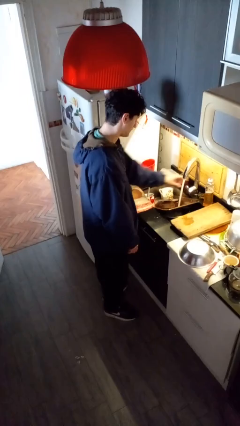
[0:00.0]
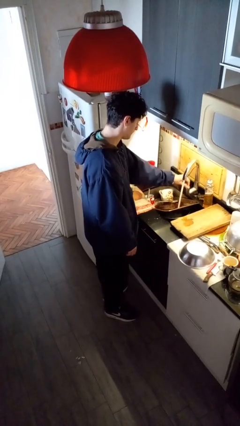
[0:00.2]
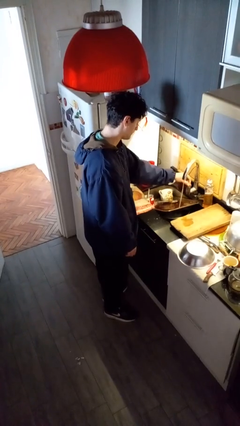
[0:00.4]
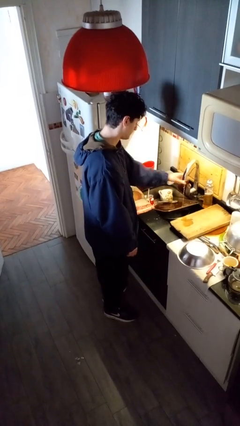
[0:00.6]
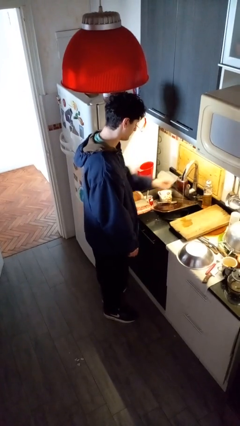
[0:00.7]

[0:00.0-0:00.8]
person turns off faucet

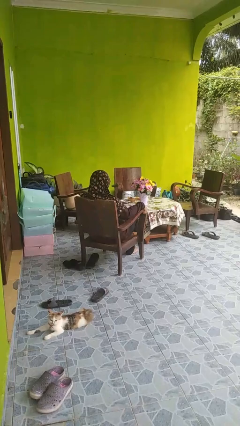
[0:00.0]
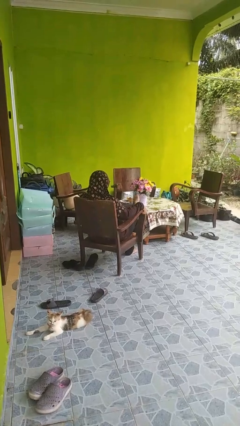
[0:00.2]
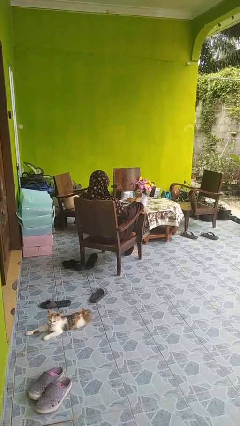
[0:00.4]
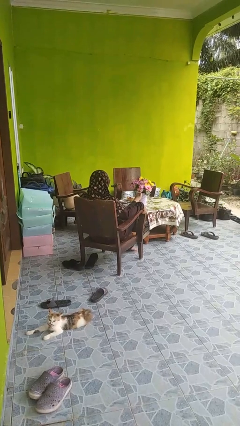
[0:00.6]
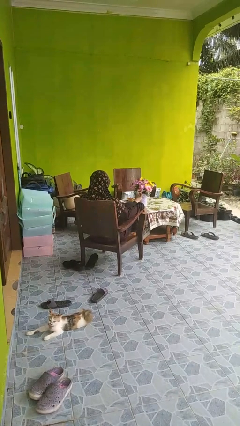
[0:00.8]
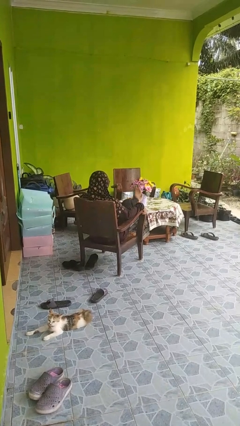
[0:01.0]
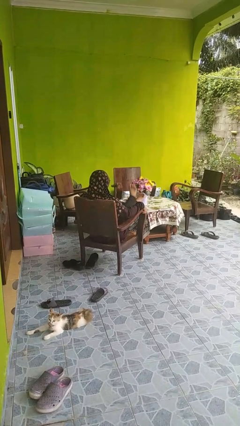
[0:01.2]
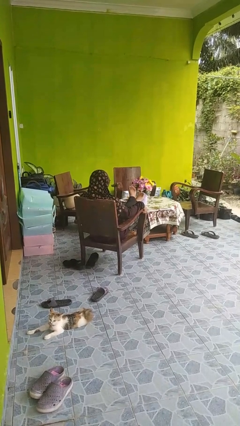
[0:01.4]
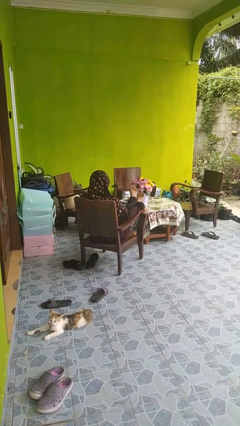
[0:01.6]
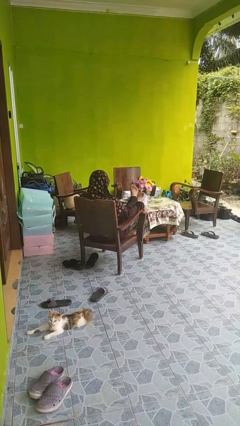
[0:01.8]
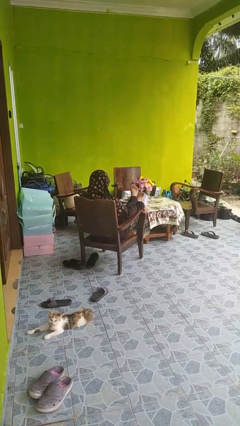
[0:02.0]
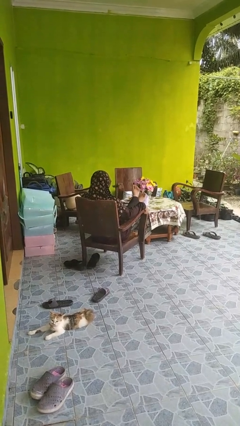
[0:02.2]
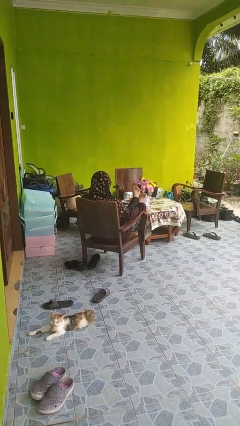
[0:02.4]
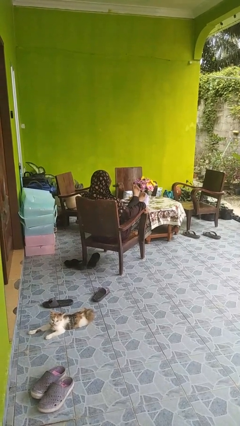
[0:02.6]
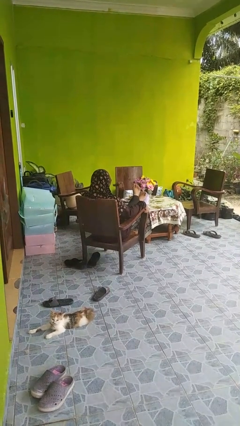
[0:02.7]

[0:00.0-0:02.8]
person puts feet up

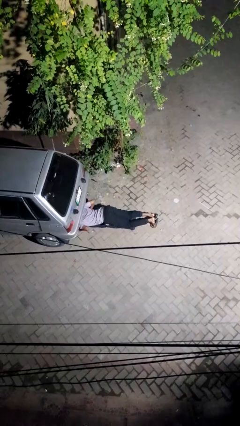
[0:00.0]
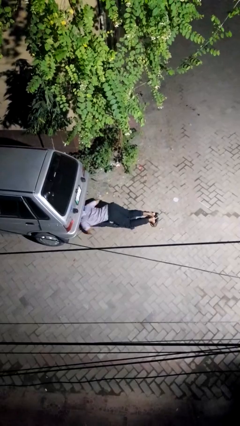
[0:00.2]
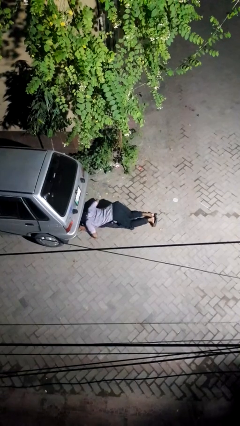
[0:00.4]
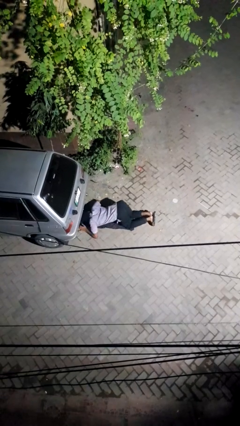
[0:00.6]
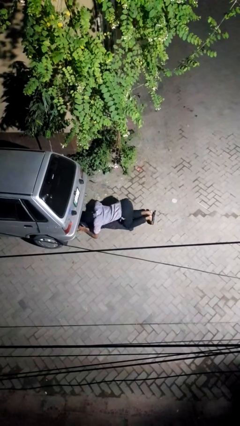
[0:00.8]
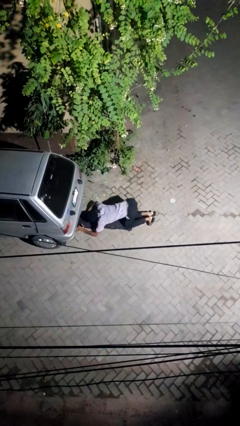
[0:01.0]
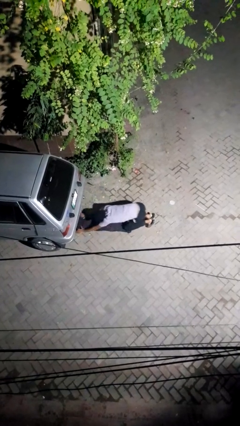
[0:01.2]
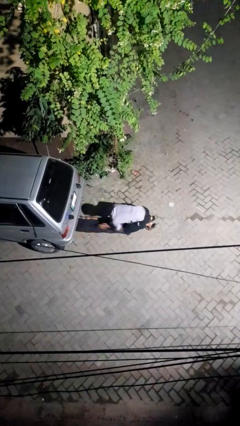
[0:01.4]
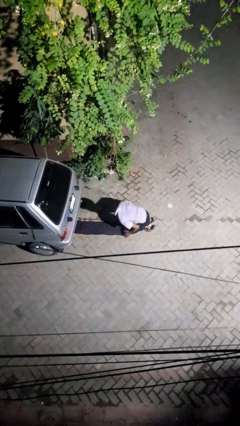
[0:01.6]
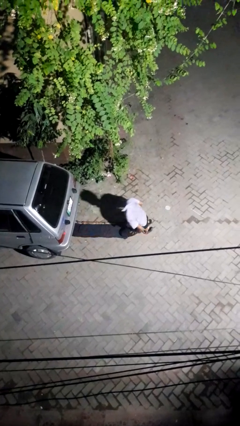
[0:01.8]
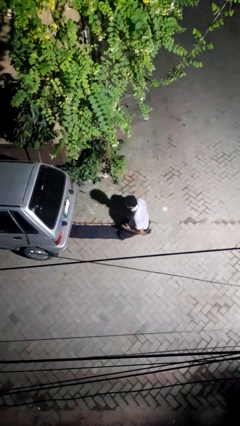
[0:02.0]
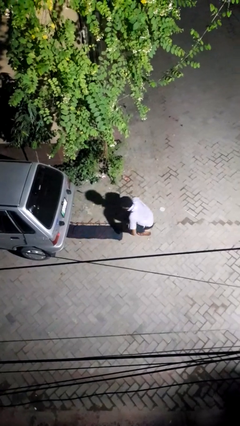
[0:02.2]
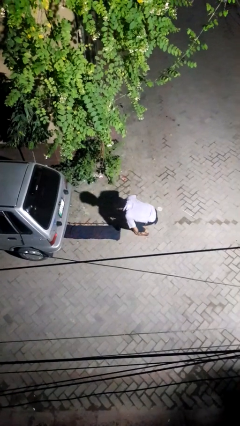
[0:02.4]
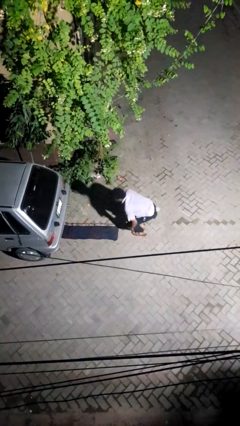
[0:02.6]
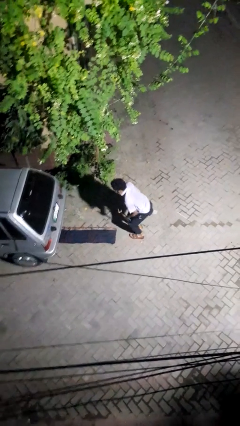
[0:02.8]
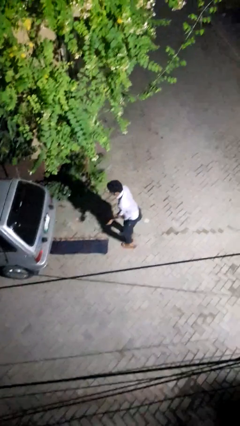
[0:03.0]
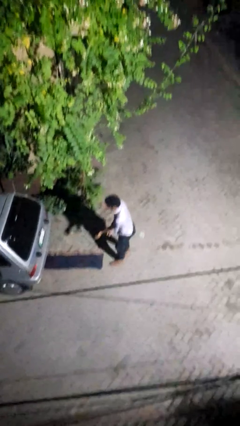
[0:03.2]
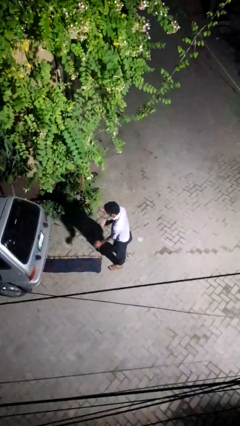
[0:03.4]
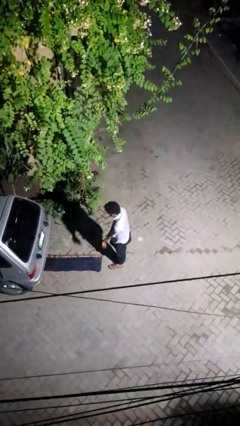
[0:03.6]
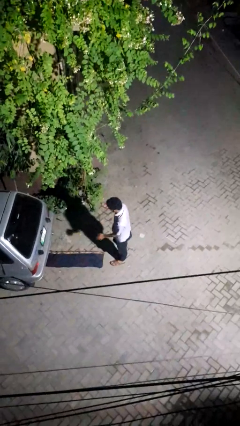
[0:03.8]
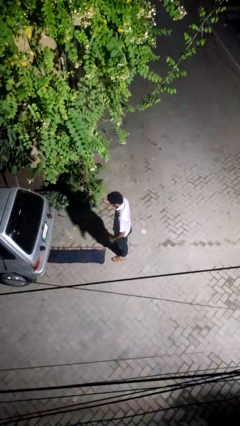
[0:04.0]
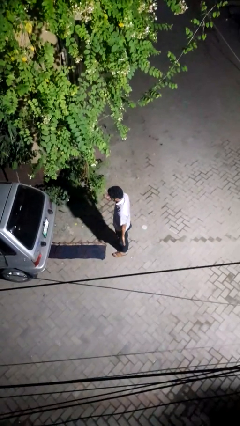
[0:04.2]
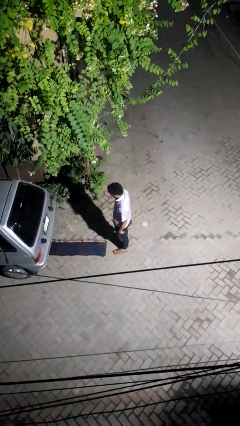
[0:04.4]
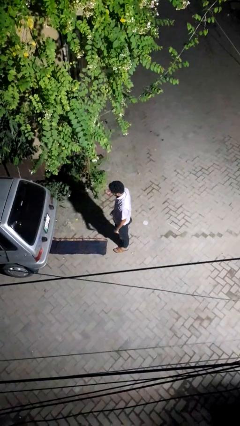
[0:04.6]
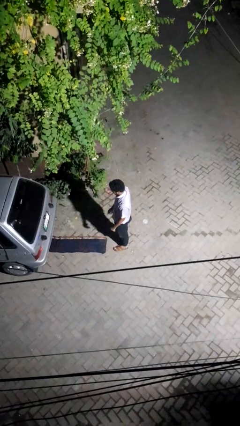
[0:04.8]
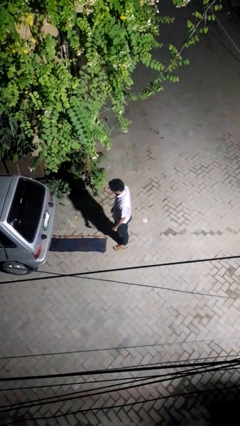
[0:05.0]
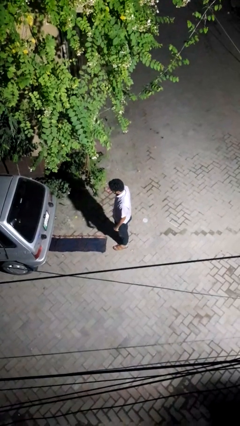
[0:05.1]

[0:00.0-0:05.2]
person crawls out from under vehicle

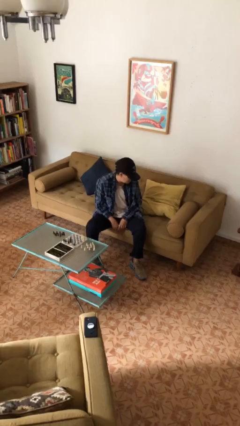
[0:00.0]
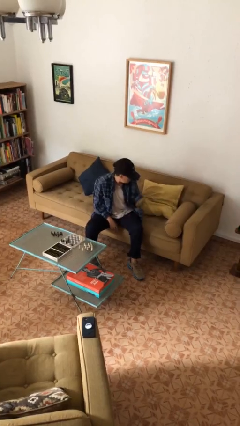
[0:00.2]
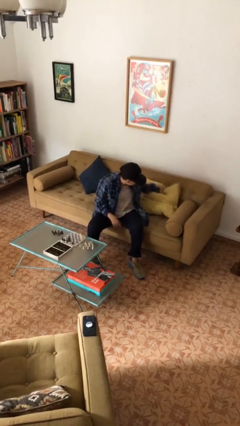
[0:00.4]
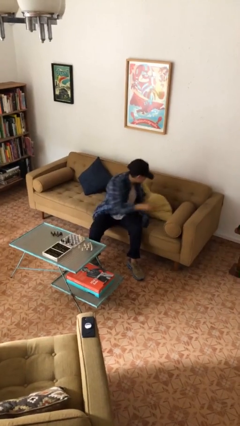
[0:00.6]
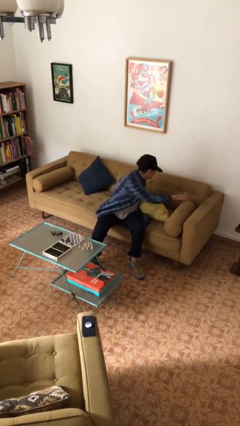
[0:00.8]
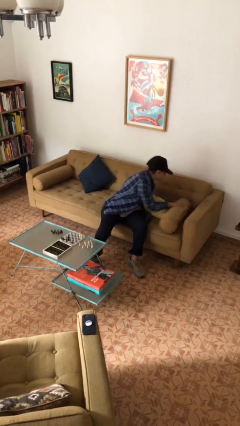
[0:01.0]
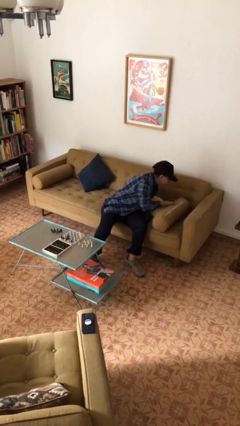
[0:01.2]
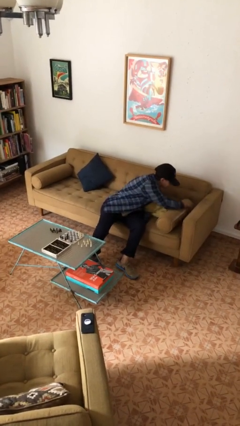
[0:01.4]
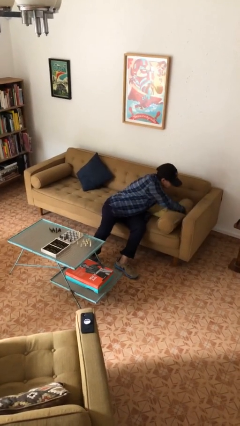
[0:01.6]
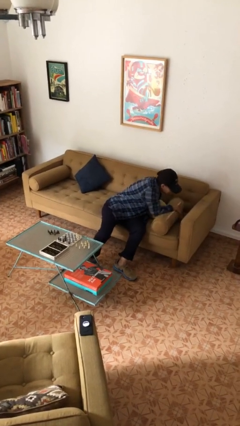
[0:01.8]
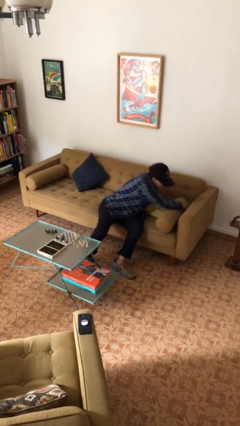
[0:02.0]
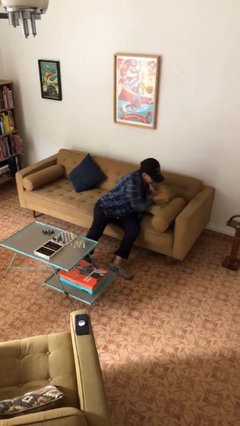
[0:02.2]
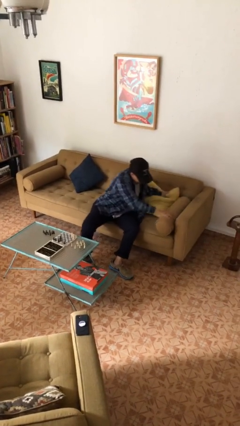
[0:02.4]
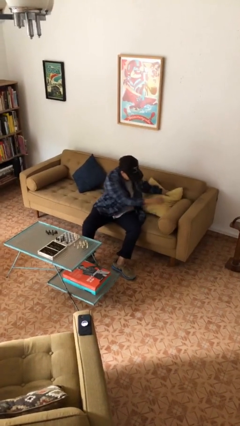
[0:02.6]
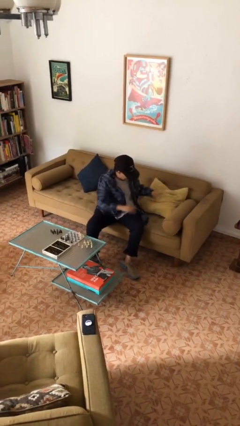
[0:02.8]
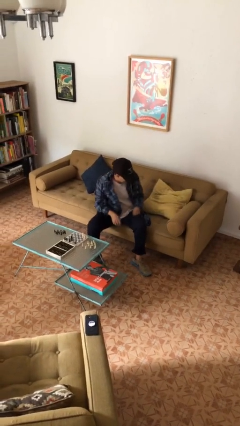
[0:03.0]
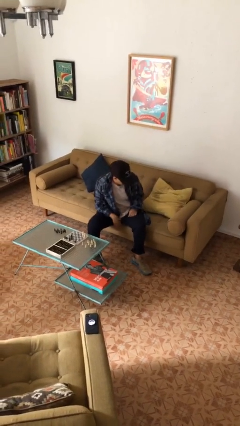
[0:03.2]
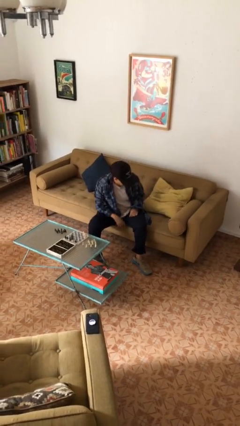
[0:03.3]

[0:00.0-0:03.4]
person searches in couch

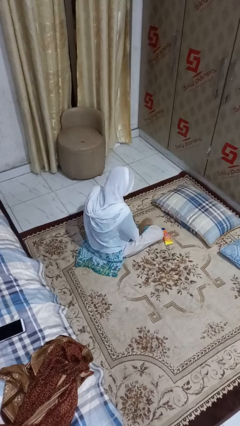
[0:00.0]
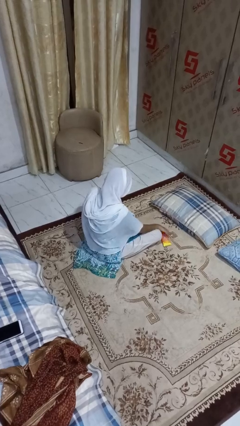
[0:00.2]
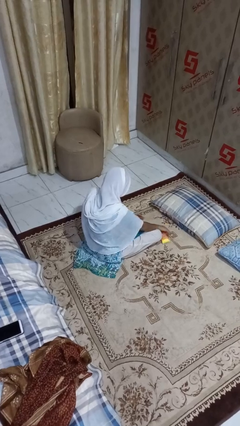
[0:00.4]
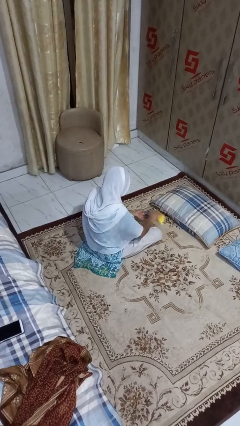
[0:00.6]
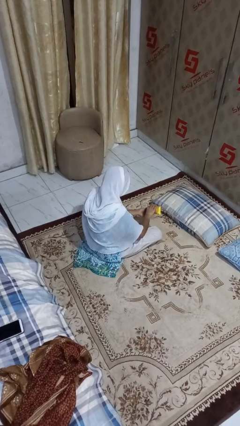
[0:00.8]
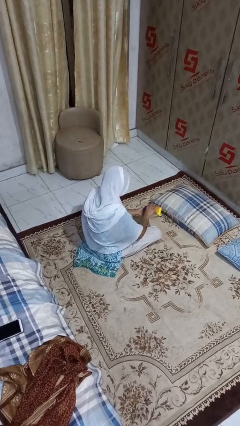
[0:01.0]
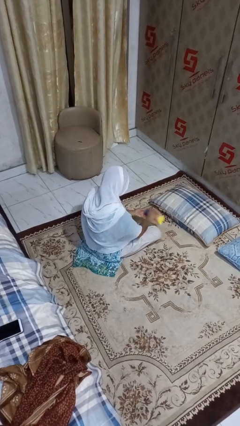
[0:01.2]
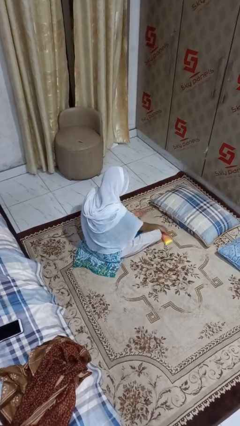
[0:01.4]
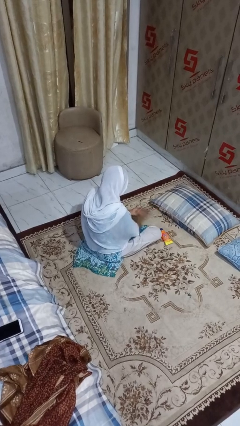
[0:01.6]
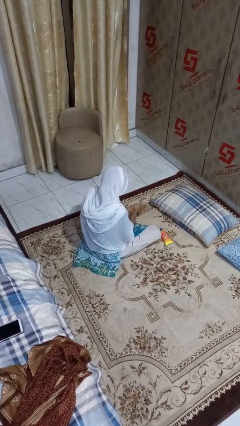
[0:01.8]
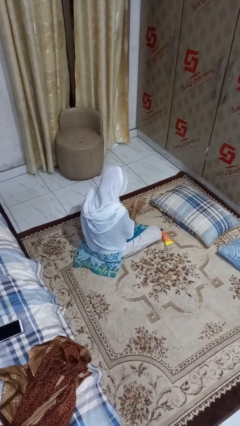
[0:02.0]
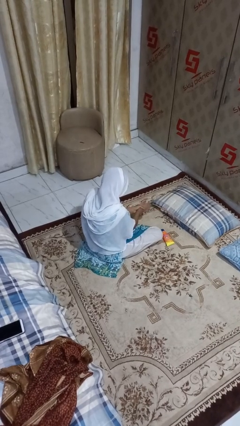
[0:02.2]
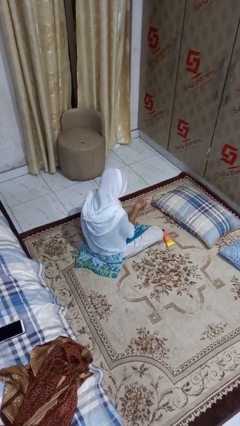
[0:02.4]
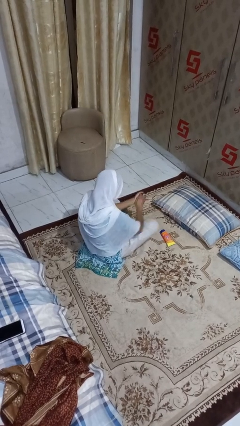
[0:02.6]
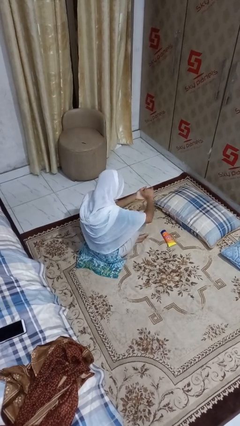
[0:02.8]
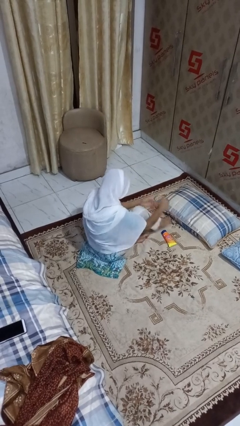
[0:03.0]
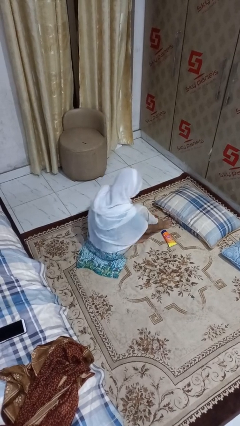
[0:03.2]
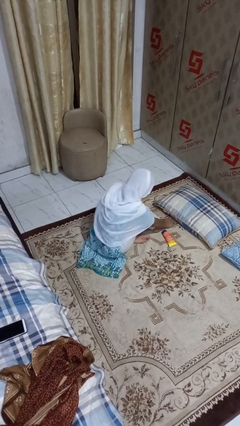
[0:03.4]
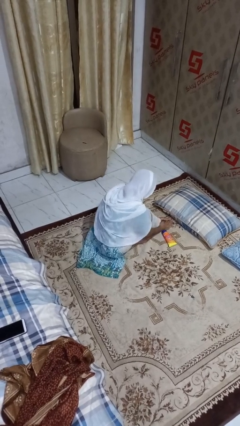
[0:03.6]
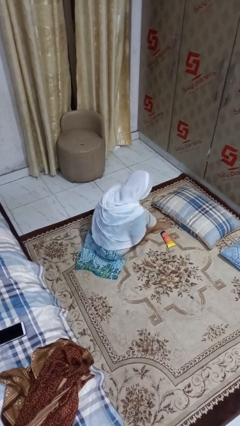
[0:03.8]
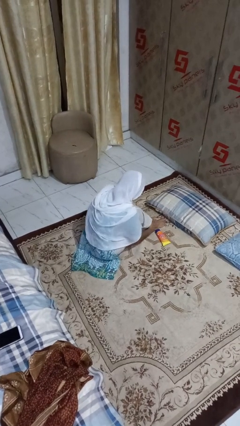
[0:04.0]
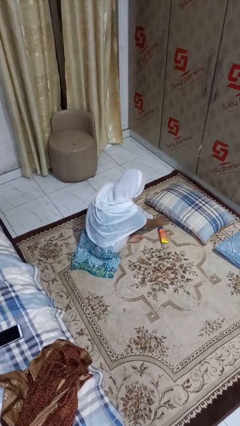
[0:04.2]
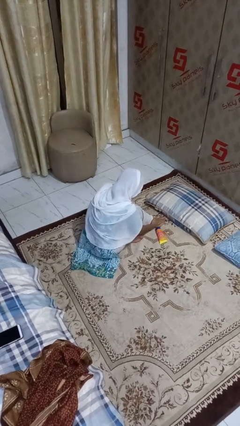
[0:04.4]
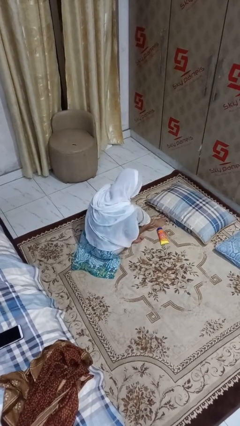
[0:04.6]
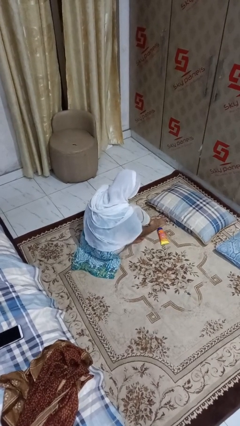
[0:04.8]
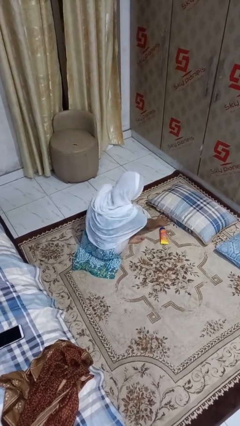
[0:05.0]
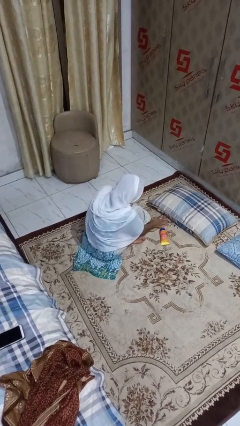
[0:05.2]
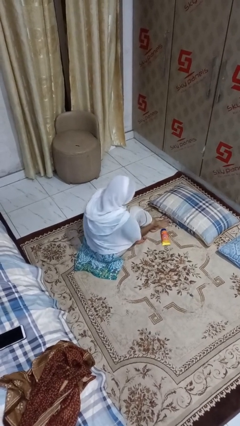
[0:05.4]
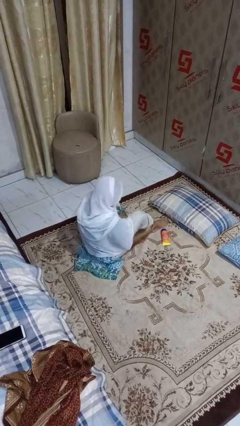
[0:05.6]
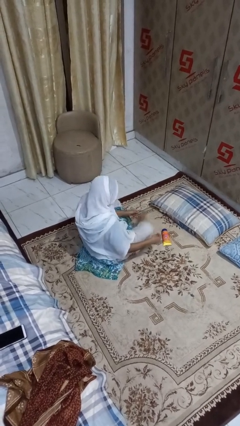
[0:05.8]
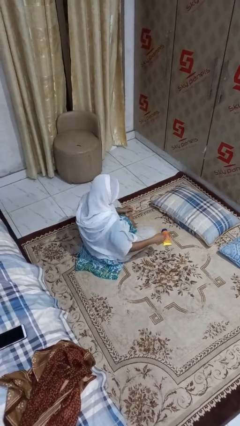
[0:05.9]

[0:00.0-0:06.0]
person applies sunscreen
